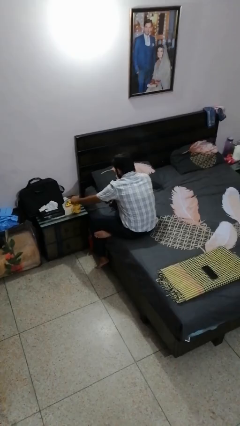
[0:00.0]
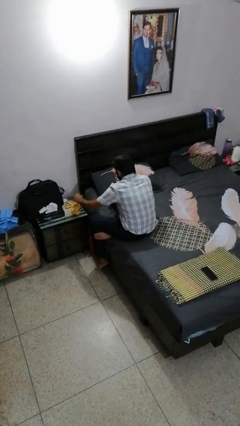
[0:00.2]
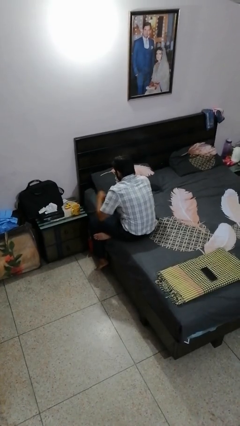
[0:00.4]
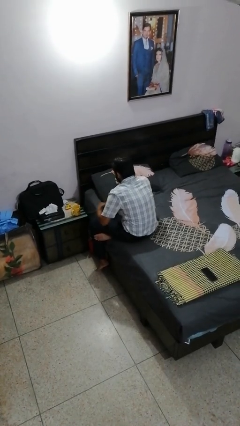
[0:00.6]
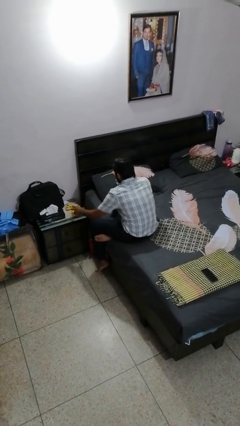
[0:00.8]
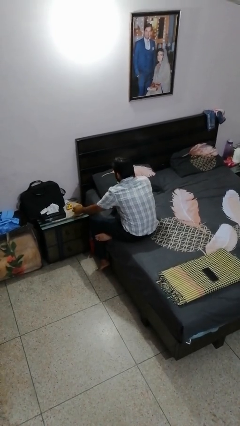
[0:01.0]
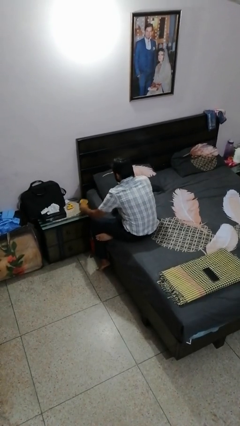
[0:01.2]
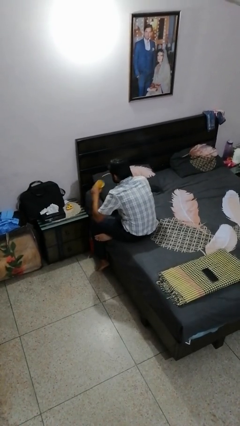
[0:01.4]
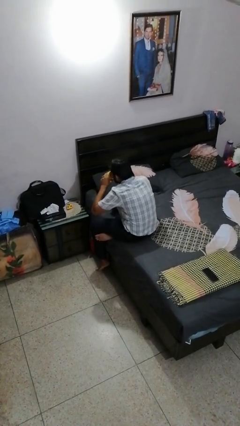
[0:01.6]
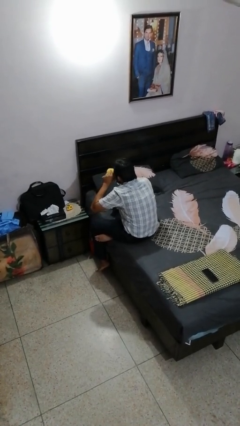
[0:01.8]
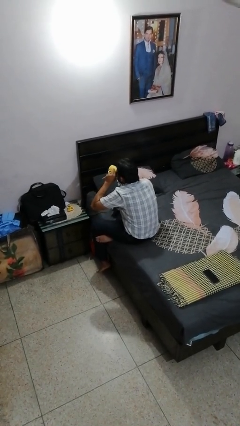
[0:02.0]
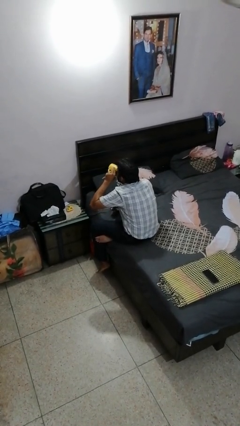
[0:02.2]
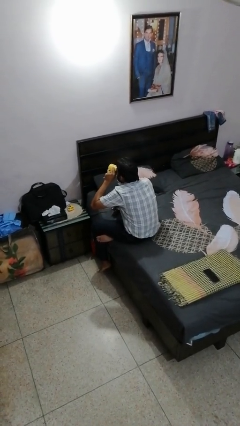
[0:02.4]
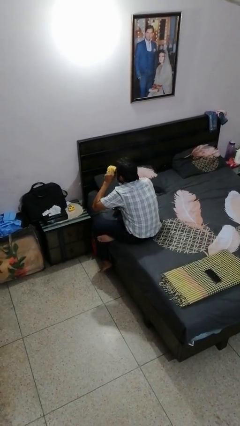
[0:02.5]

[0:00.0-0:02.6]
person drinks from mug

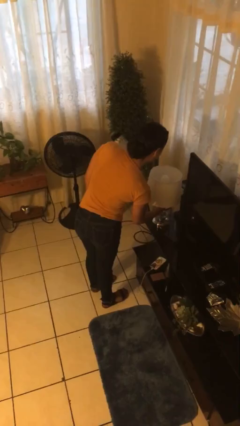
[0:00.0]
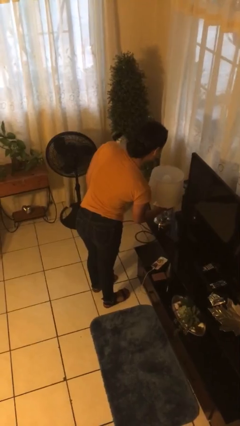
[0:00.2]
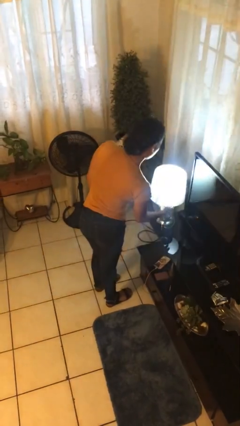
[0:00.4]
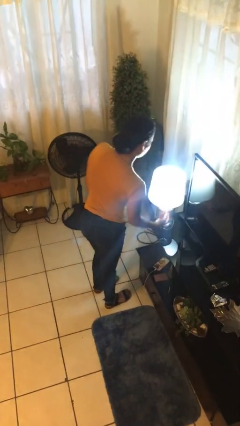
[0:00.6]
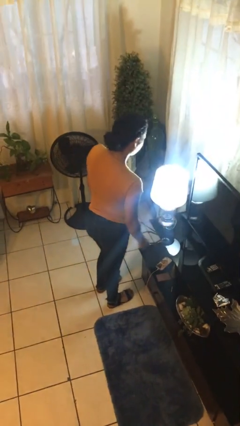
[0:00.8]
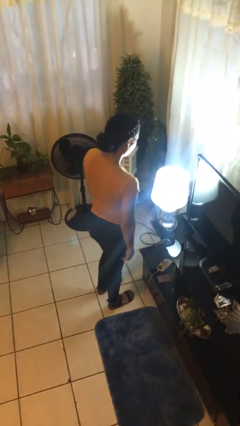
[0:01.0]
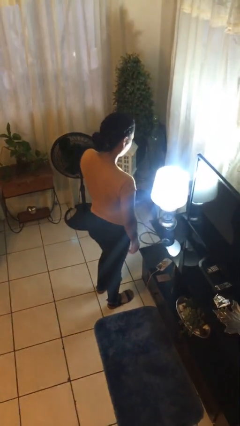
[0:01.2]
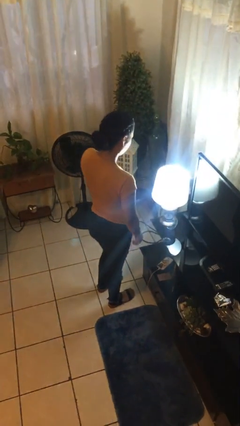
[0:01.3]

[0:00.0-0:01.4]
person turns on lamp

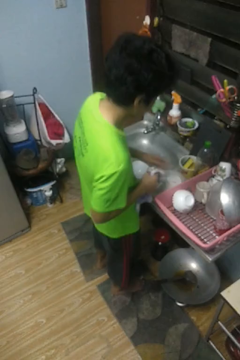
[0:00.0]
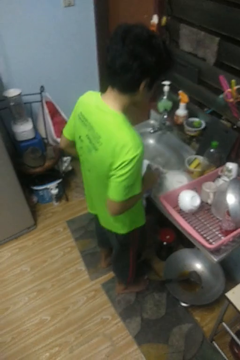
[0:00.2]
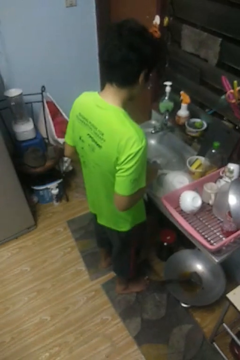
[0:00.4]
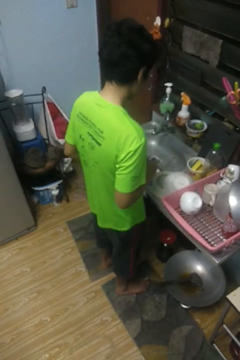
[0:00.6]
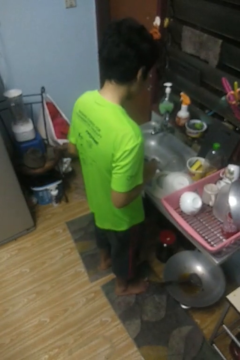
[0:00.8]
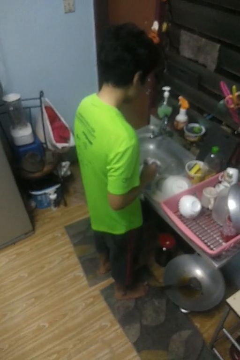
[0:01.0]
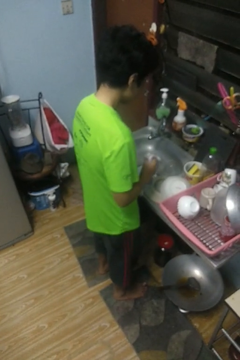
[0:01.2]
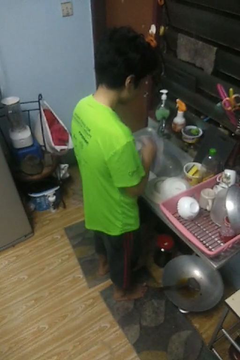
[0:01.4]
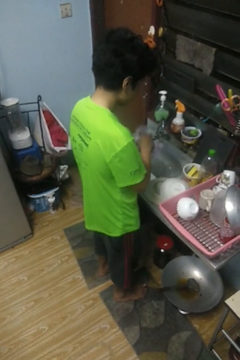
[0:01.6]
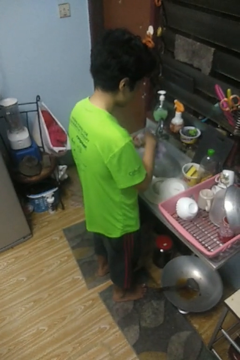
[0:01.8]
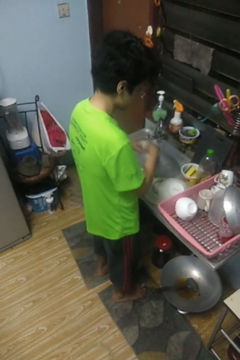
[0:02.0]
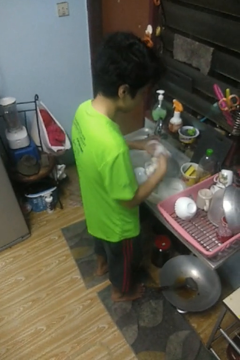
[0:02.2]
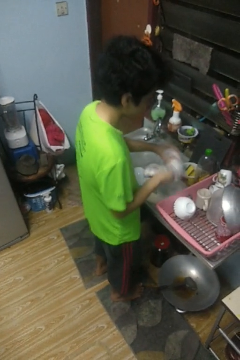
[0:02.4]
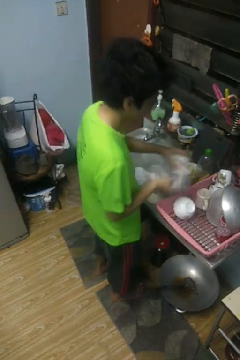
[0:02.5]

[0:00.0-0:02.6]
person dries dish

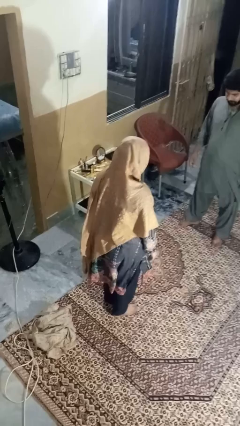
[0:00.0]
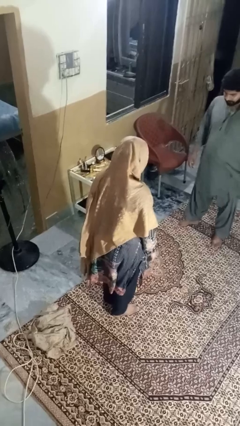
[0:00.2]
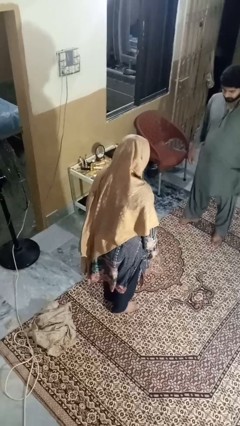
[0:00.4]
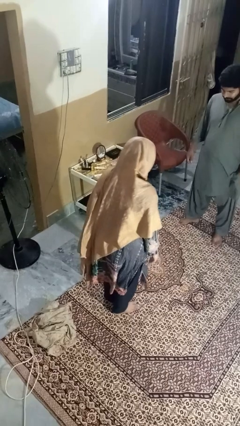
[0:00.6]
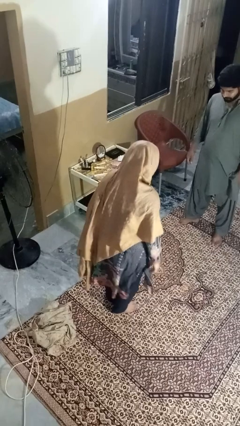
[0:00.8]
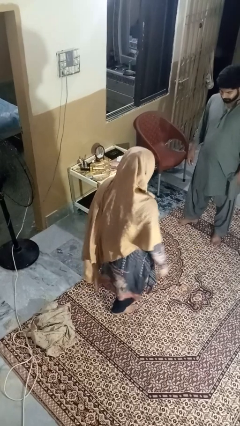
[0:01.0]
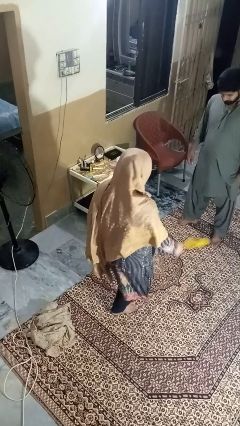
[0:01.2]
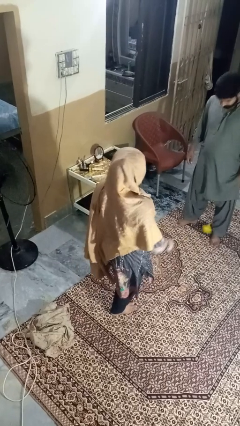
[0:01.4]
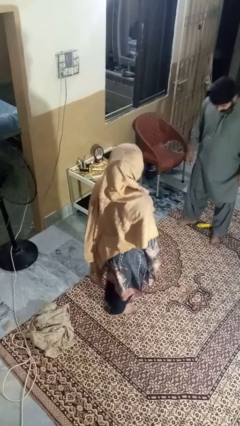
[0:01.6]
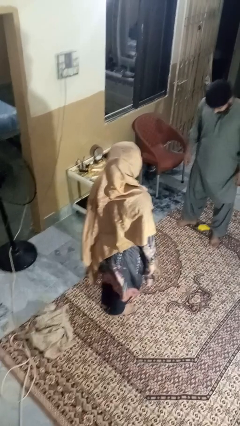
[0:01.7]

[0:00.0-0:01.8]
person kicks object to person

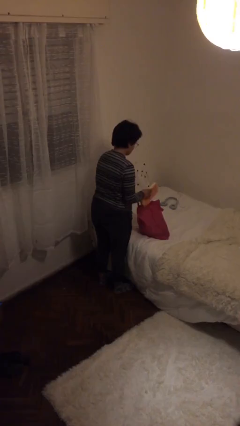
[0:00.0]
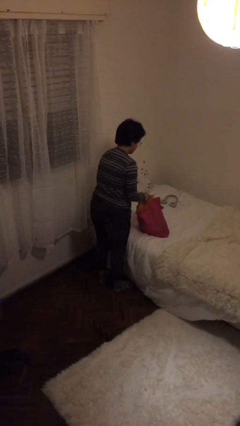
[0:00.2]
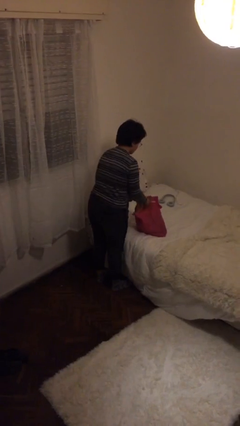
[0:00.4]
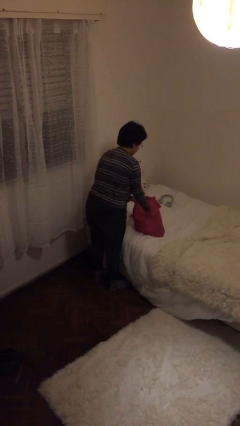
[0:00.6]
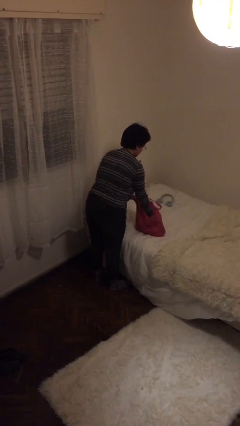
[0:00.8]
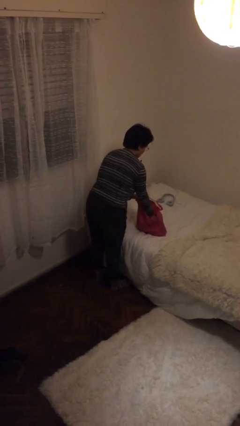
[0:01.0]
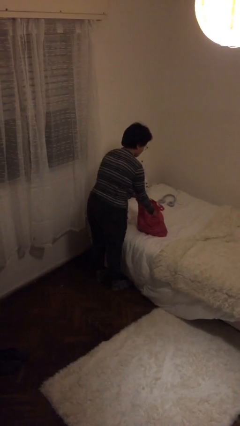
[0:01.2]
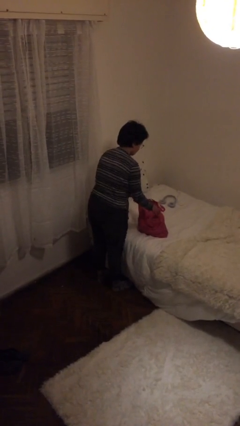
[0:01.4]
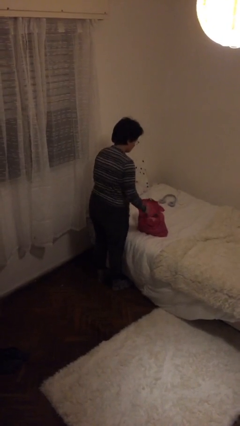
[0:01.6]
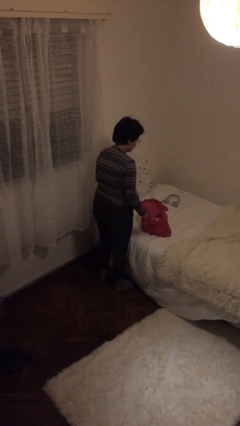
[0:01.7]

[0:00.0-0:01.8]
person puts object into bag

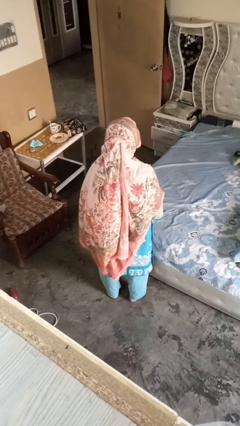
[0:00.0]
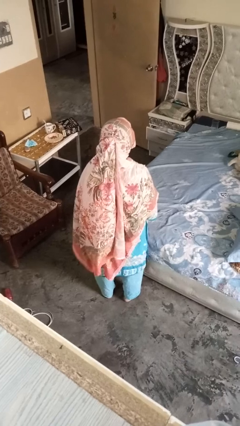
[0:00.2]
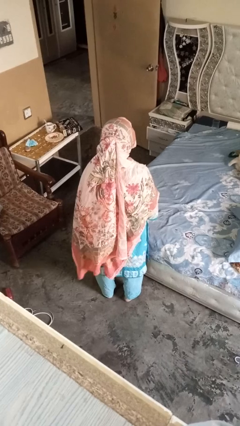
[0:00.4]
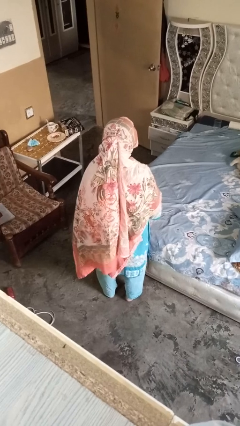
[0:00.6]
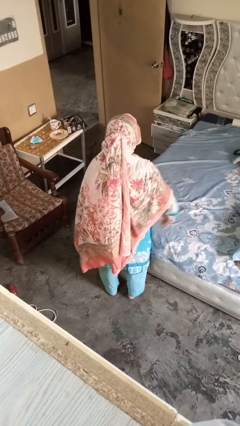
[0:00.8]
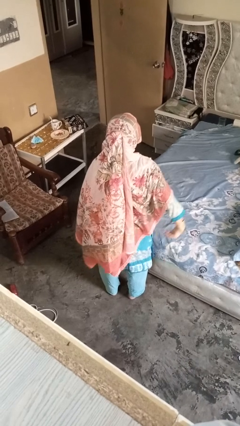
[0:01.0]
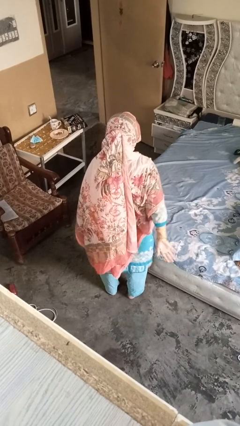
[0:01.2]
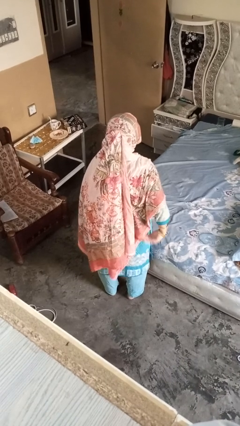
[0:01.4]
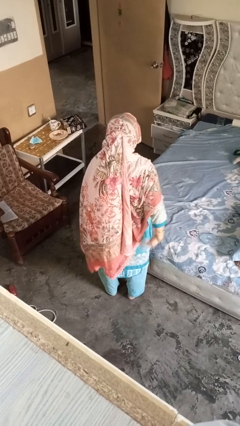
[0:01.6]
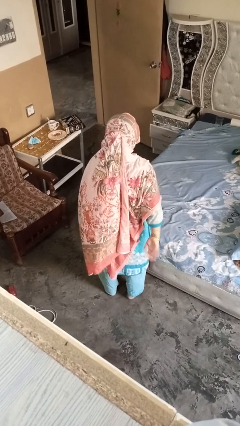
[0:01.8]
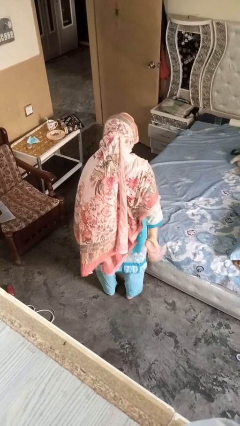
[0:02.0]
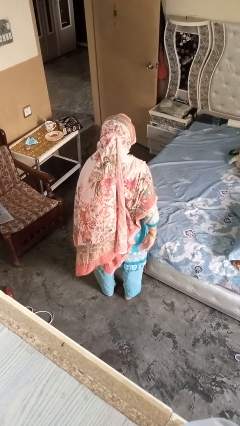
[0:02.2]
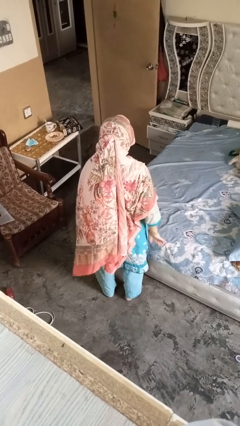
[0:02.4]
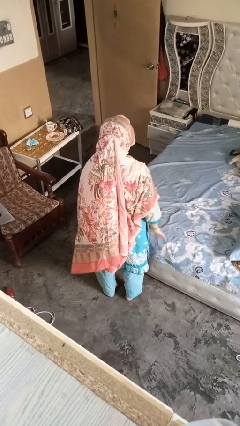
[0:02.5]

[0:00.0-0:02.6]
person gestures behind me
